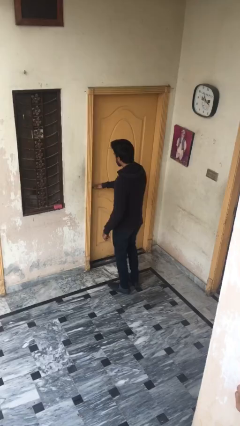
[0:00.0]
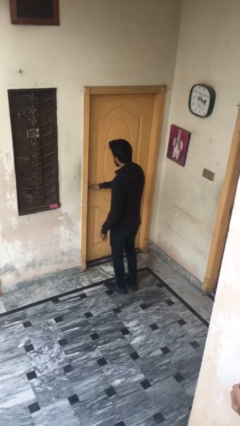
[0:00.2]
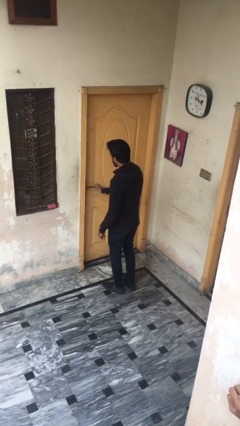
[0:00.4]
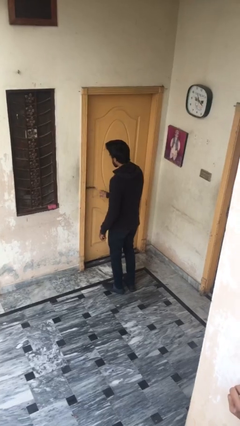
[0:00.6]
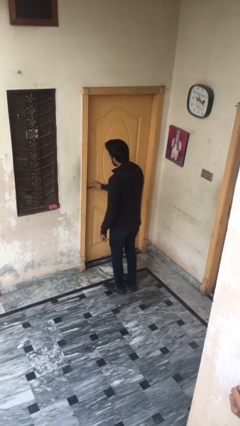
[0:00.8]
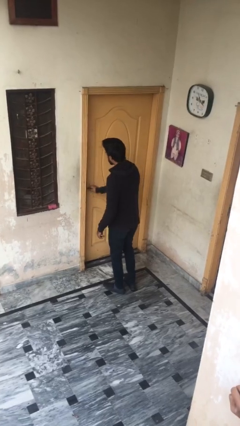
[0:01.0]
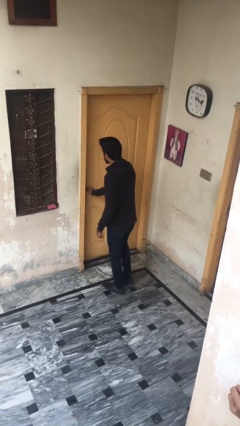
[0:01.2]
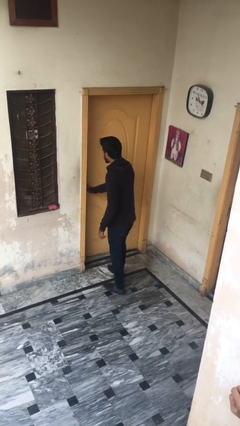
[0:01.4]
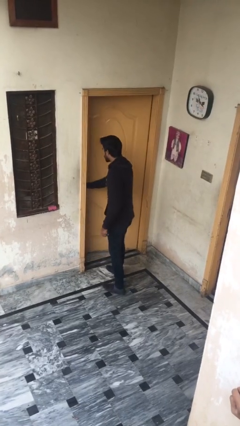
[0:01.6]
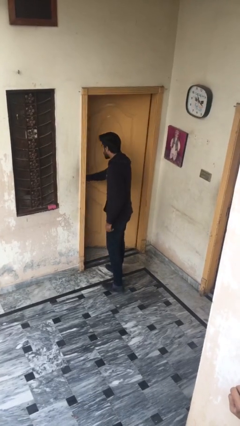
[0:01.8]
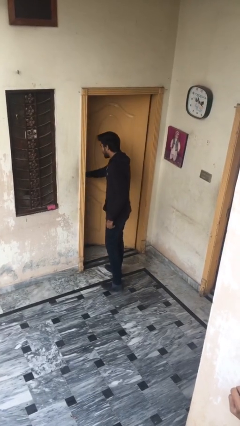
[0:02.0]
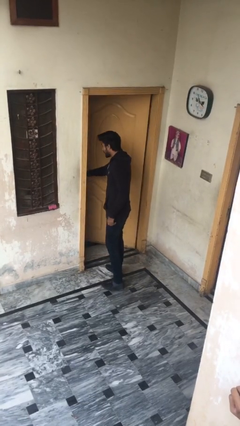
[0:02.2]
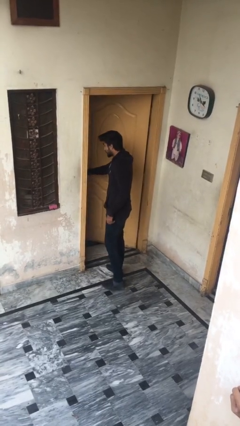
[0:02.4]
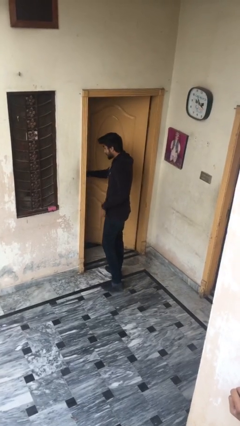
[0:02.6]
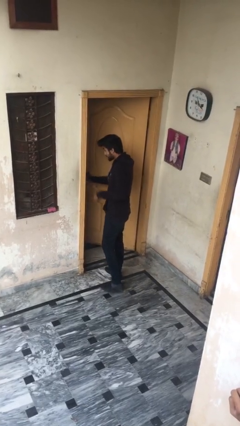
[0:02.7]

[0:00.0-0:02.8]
person opens facility door

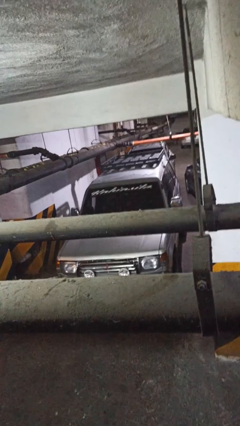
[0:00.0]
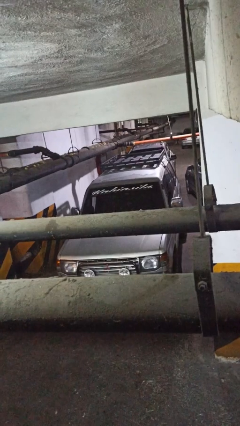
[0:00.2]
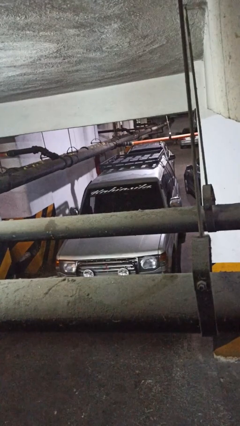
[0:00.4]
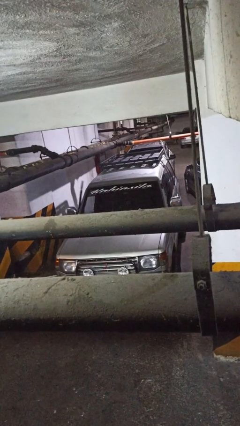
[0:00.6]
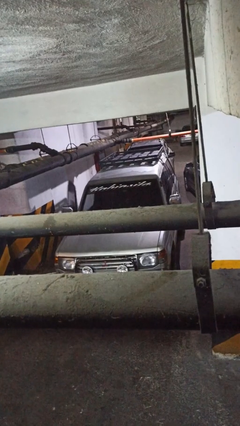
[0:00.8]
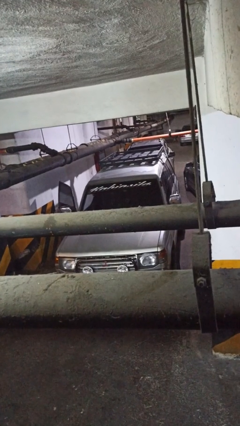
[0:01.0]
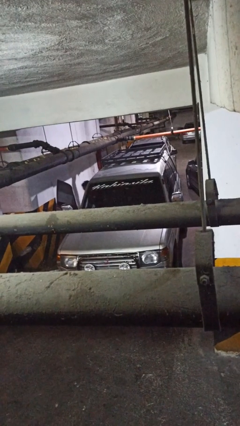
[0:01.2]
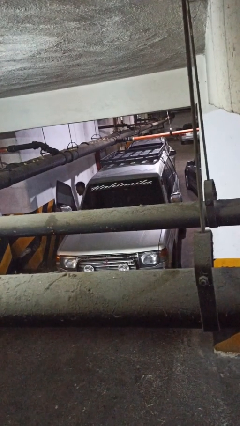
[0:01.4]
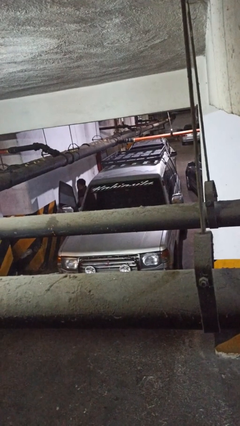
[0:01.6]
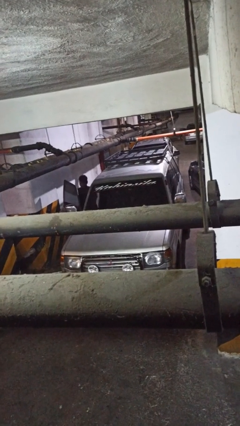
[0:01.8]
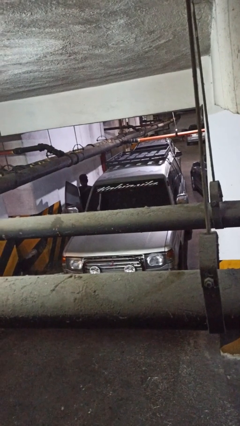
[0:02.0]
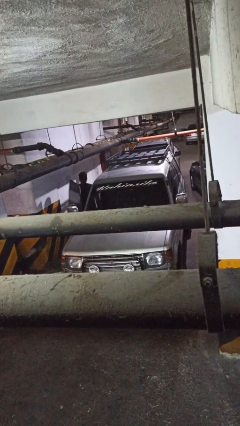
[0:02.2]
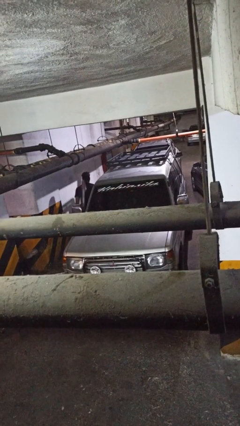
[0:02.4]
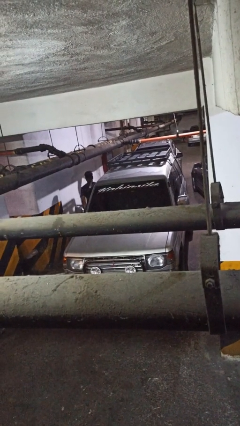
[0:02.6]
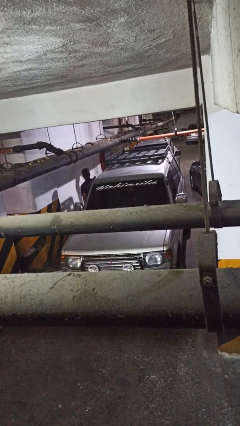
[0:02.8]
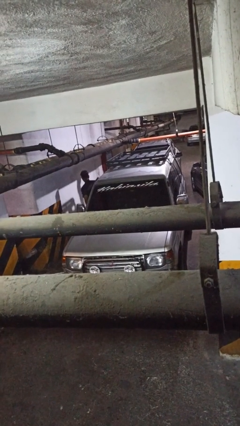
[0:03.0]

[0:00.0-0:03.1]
car drops off person

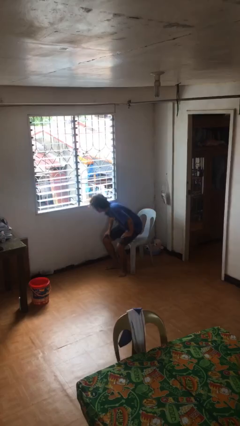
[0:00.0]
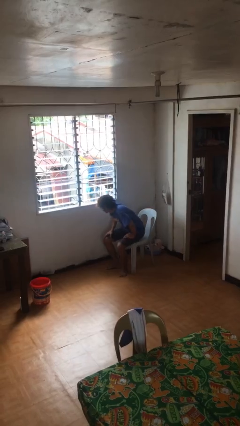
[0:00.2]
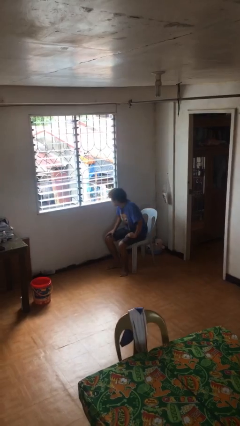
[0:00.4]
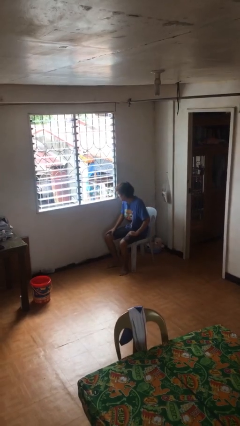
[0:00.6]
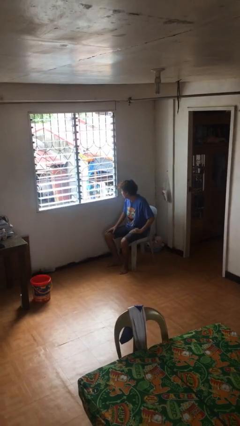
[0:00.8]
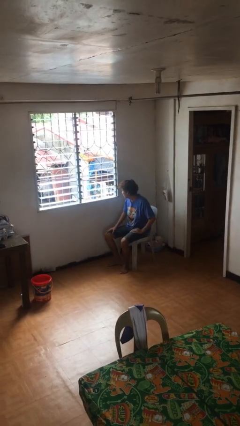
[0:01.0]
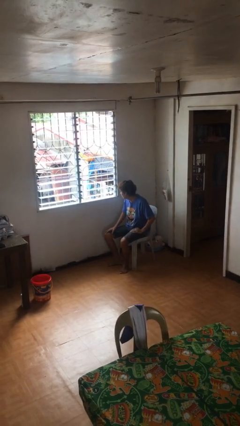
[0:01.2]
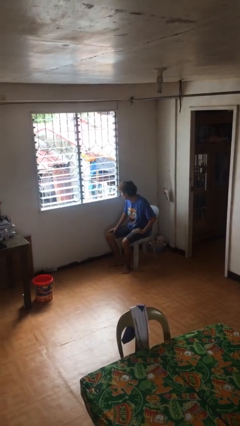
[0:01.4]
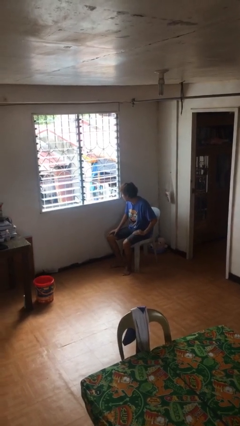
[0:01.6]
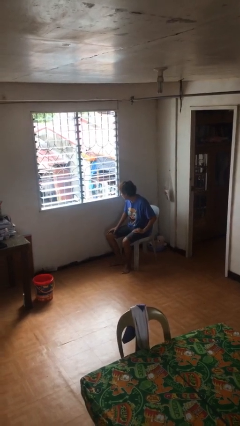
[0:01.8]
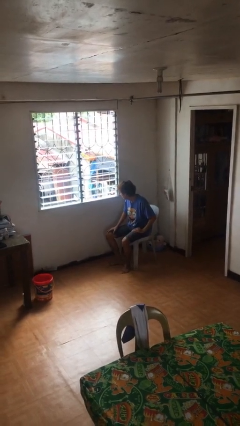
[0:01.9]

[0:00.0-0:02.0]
person sits down

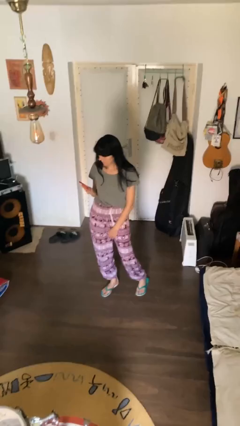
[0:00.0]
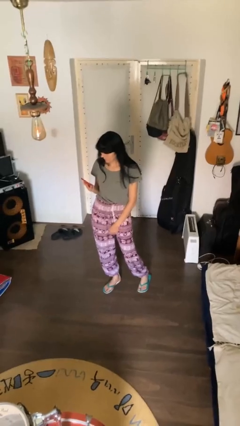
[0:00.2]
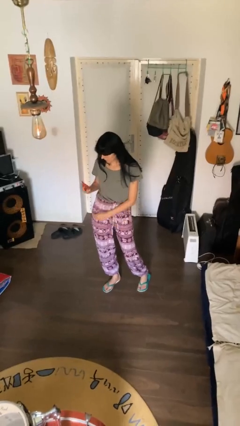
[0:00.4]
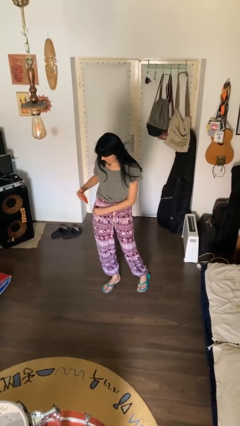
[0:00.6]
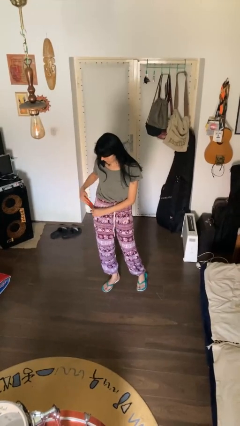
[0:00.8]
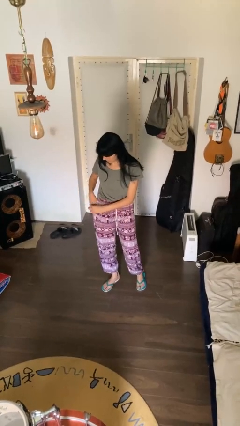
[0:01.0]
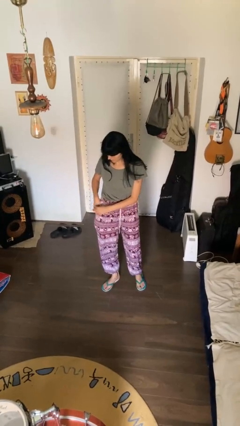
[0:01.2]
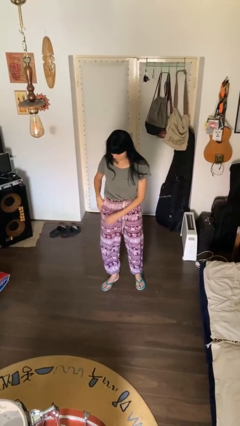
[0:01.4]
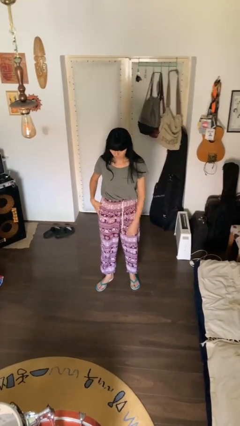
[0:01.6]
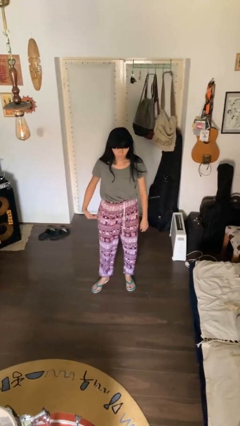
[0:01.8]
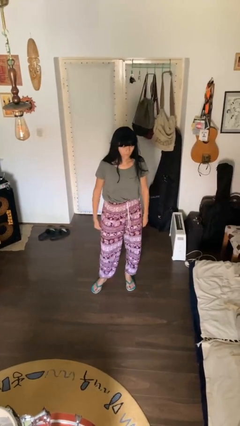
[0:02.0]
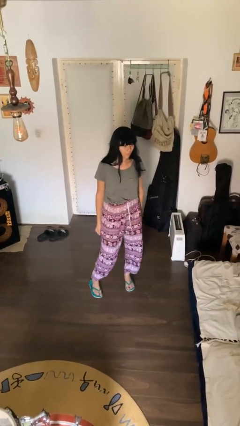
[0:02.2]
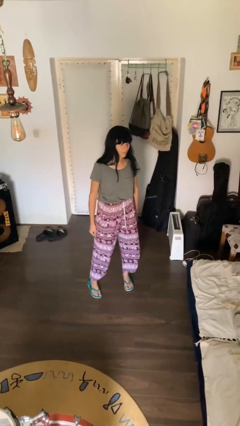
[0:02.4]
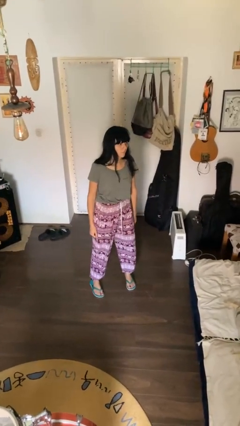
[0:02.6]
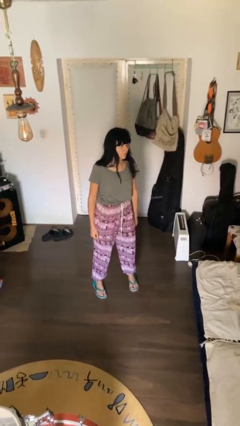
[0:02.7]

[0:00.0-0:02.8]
person puts phone into pocket

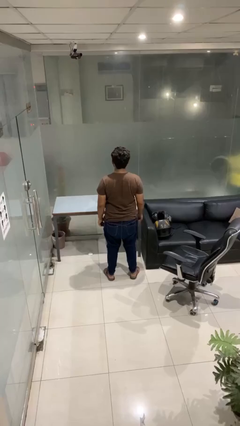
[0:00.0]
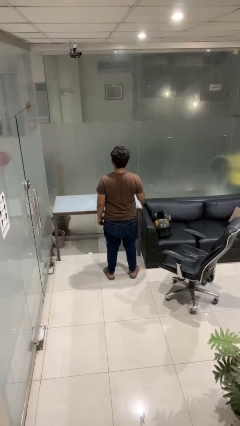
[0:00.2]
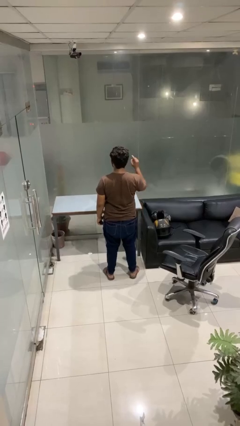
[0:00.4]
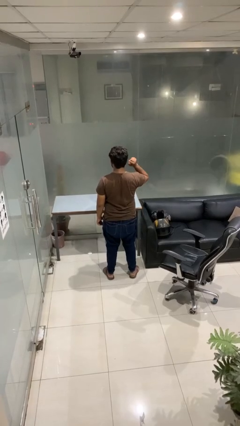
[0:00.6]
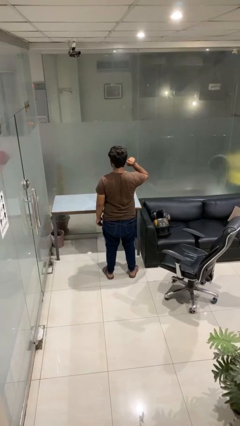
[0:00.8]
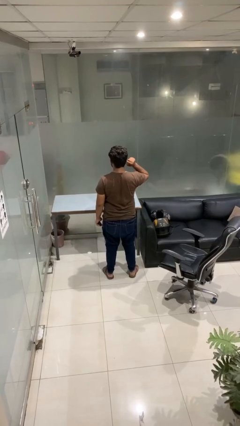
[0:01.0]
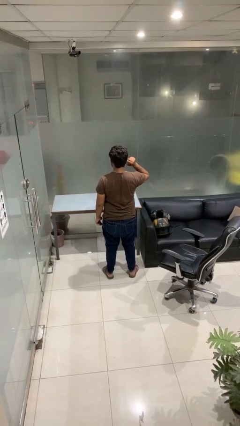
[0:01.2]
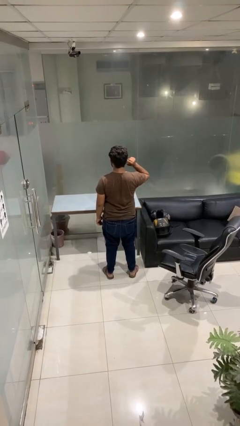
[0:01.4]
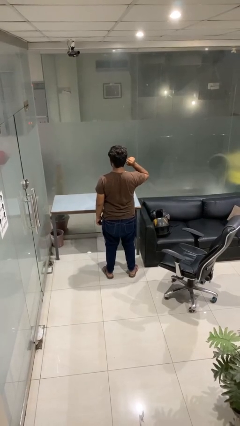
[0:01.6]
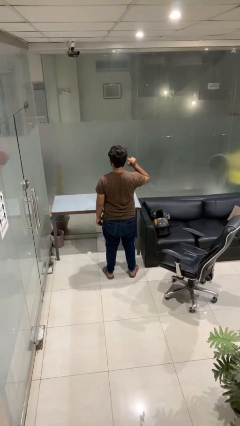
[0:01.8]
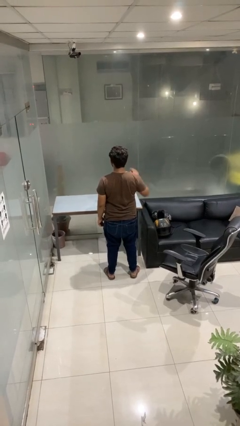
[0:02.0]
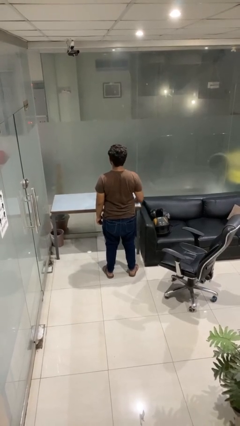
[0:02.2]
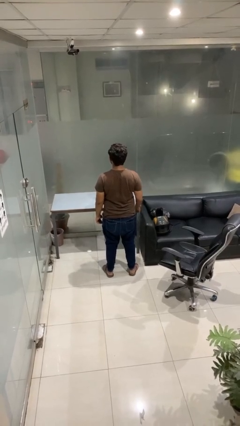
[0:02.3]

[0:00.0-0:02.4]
person gestures listen closely

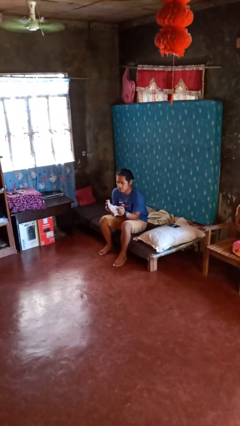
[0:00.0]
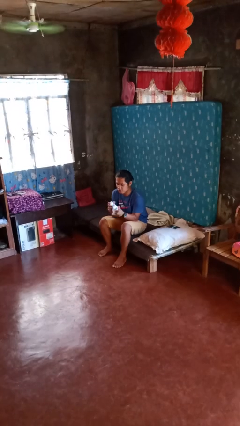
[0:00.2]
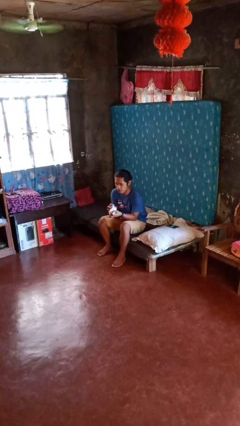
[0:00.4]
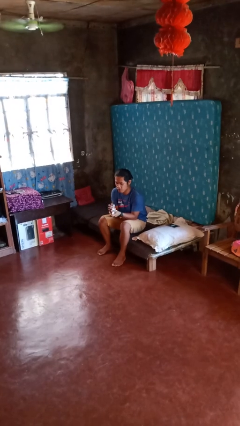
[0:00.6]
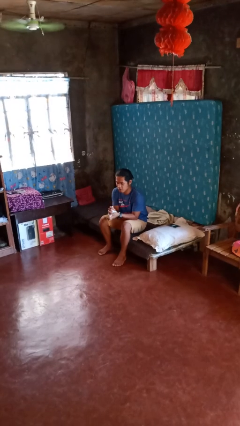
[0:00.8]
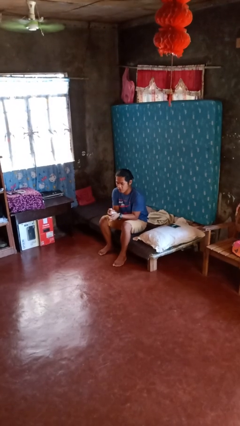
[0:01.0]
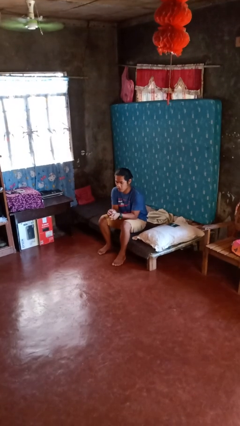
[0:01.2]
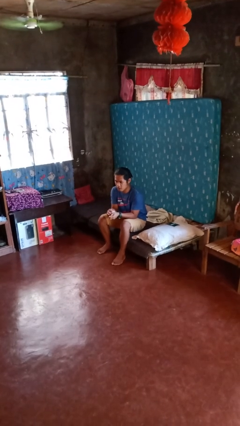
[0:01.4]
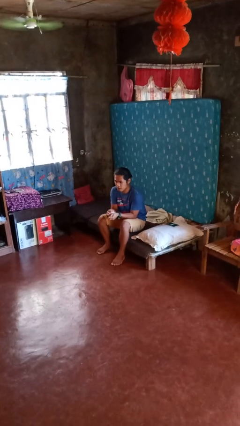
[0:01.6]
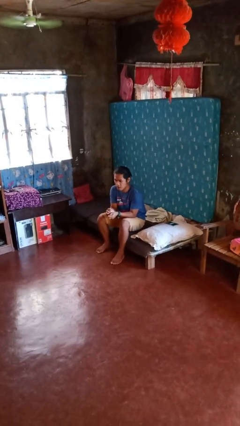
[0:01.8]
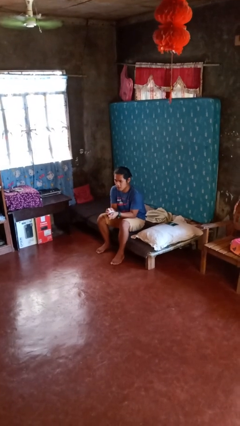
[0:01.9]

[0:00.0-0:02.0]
person crumples paper

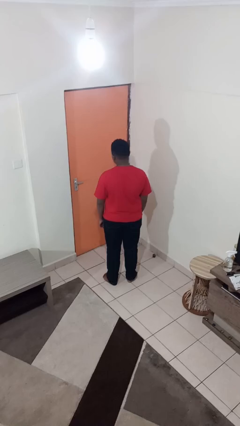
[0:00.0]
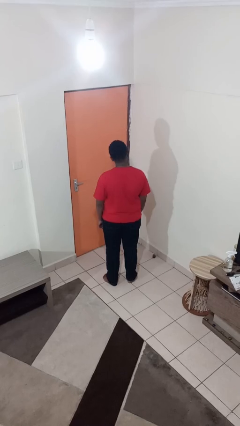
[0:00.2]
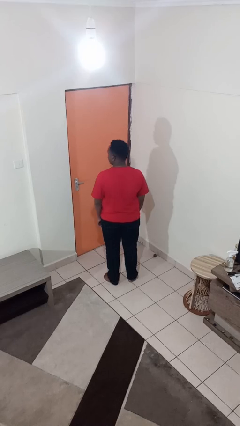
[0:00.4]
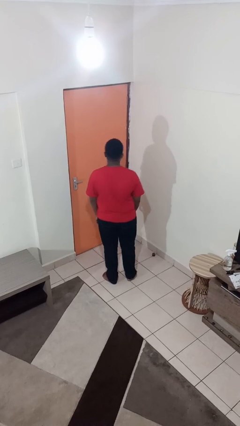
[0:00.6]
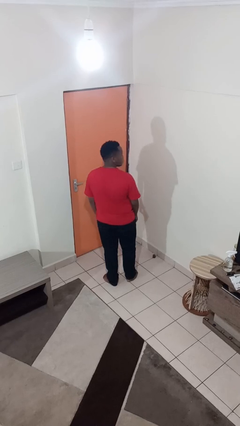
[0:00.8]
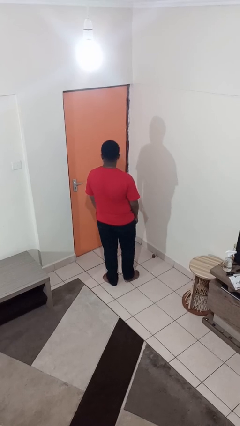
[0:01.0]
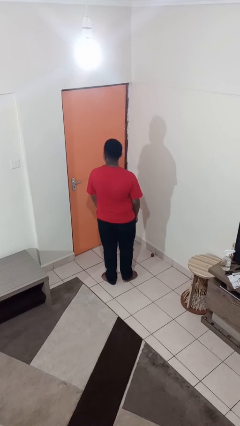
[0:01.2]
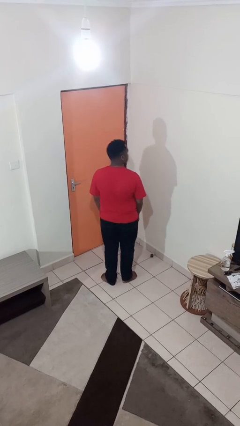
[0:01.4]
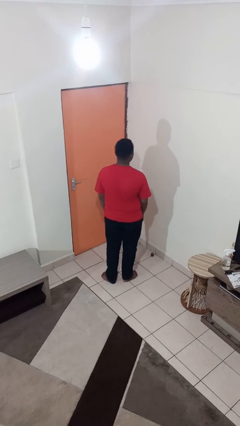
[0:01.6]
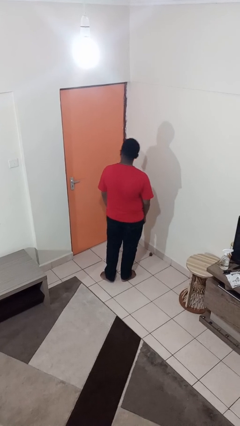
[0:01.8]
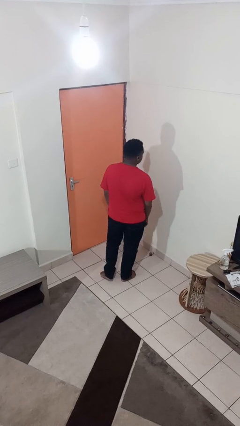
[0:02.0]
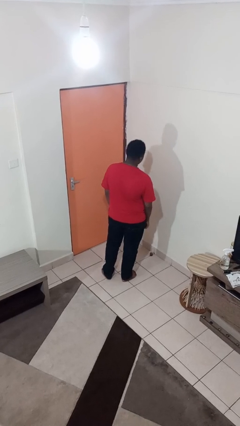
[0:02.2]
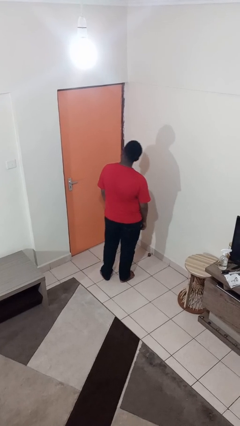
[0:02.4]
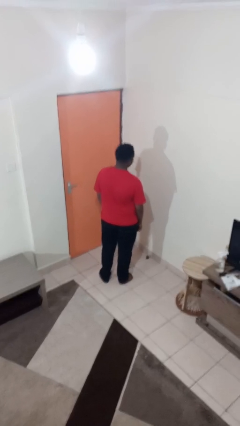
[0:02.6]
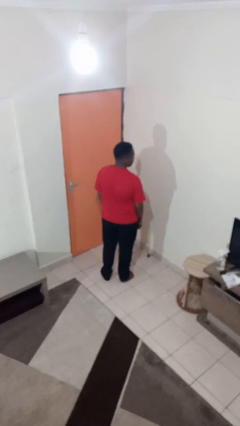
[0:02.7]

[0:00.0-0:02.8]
person shakes head
